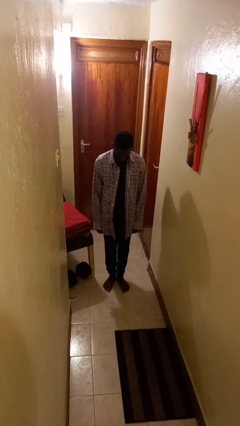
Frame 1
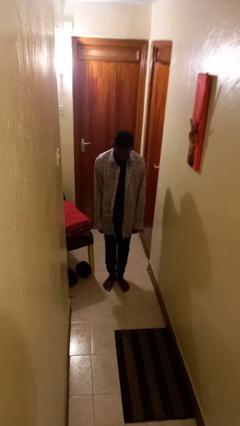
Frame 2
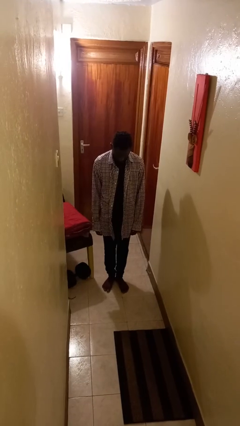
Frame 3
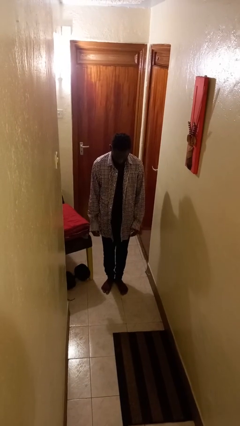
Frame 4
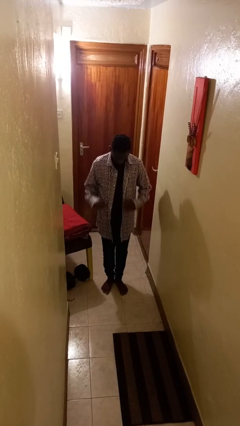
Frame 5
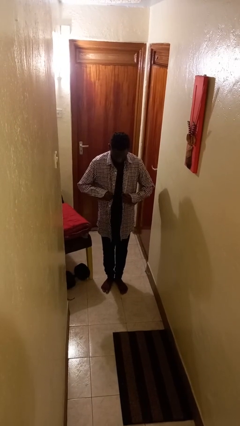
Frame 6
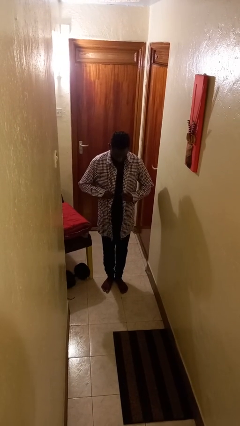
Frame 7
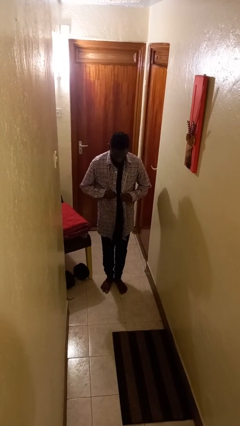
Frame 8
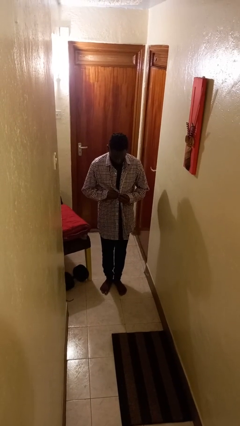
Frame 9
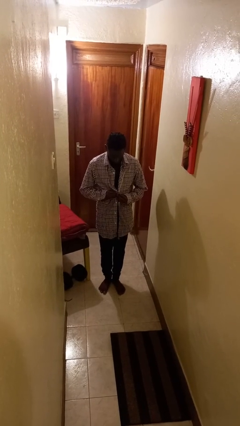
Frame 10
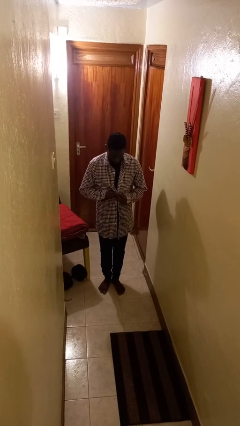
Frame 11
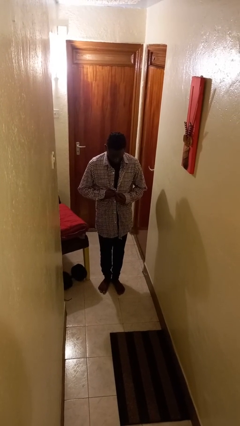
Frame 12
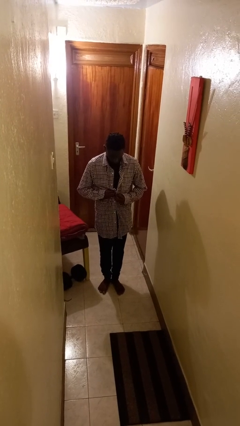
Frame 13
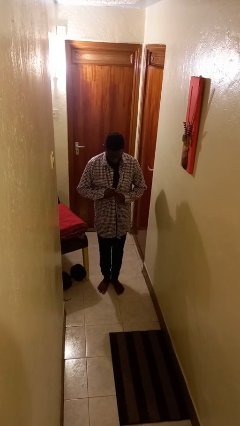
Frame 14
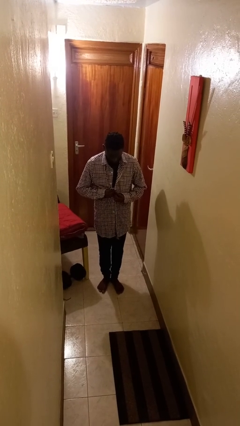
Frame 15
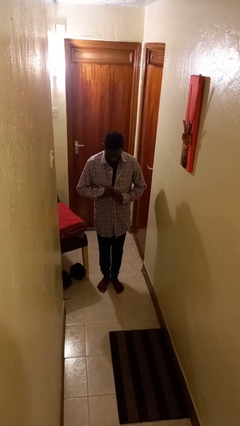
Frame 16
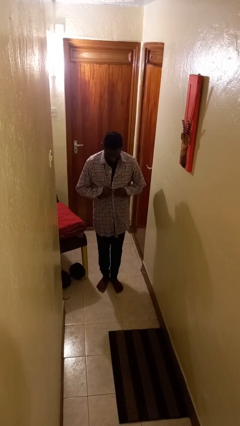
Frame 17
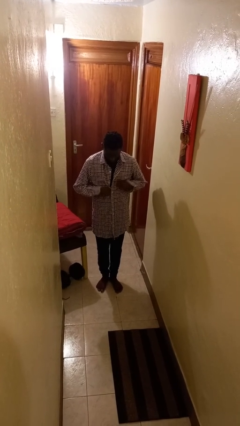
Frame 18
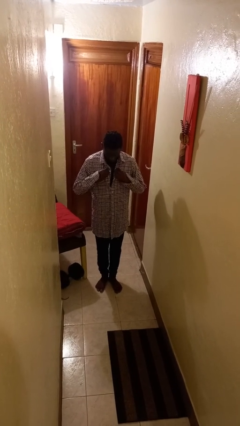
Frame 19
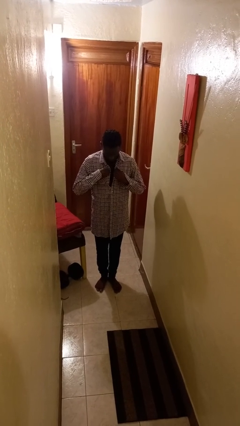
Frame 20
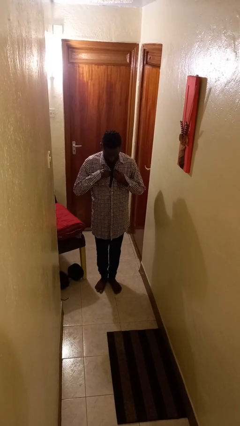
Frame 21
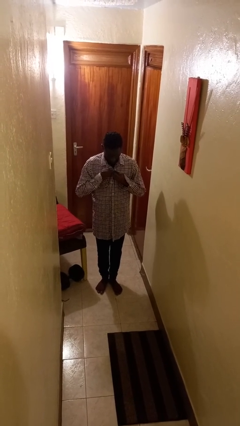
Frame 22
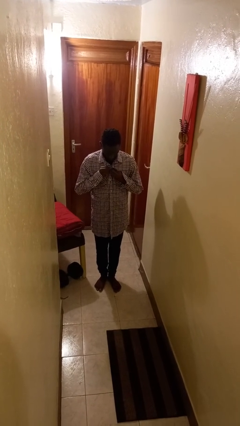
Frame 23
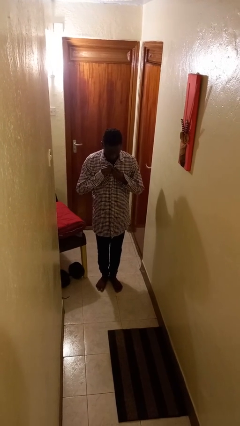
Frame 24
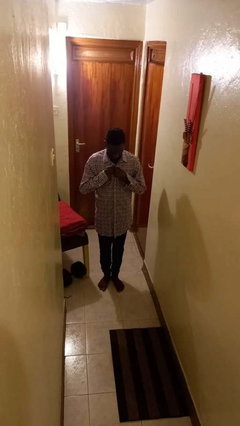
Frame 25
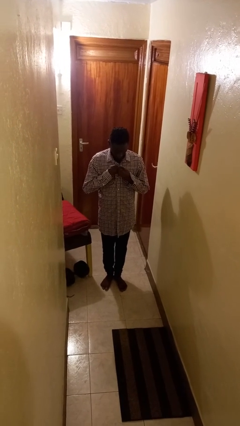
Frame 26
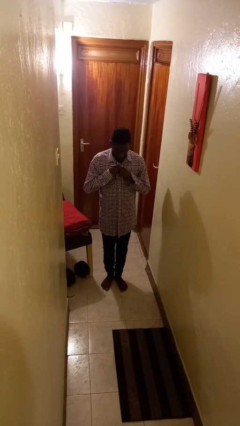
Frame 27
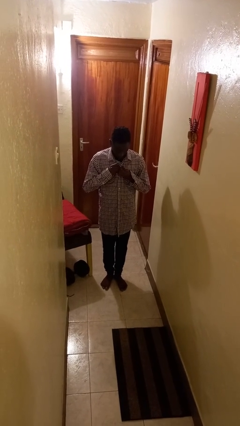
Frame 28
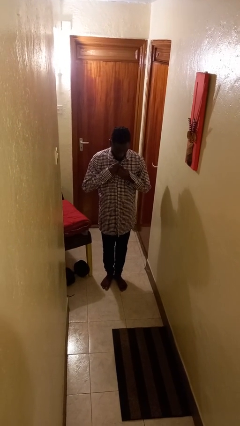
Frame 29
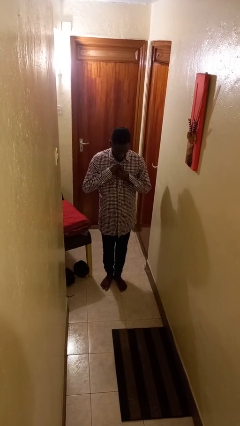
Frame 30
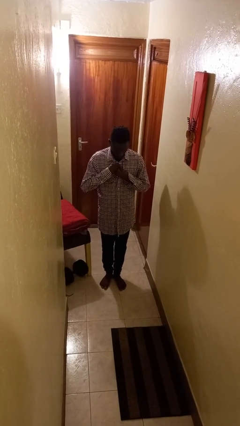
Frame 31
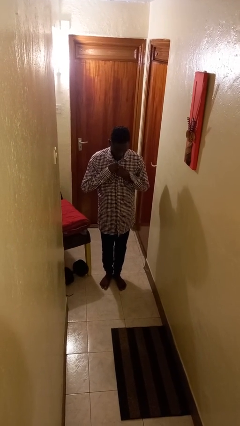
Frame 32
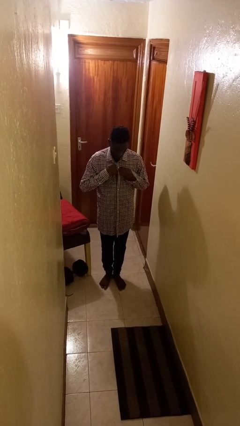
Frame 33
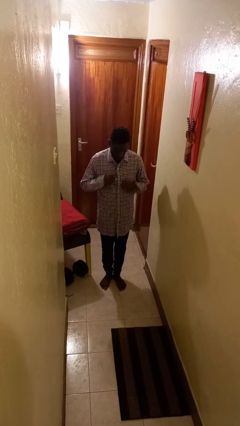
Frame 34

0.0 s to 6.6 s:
person buttons shirt

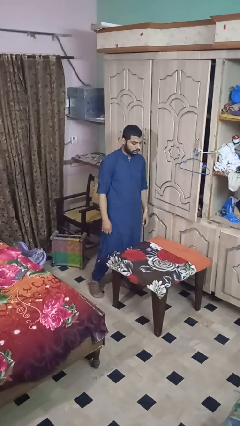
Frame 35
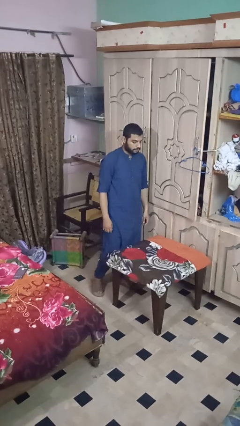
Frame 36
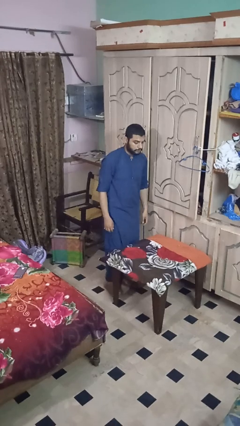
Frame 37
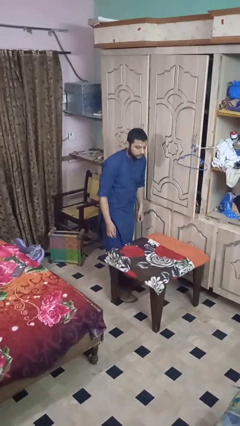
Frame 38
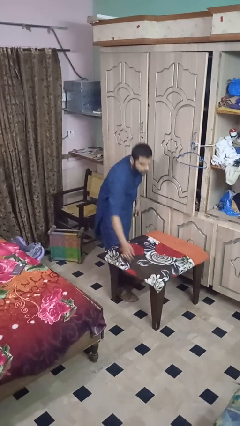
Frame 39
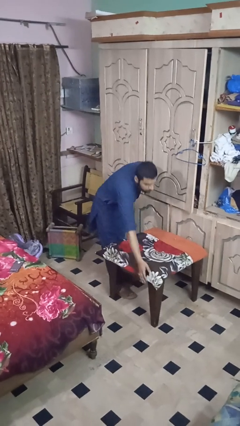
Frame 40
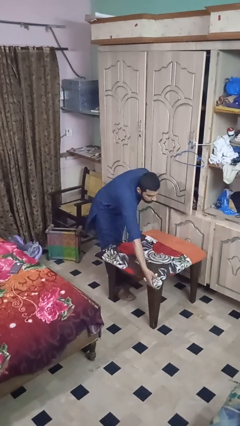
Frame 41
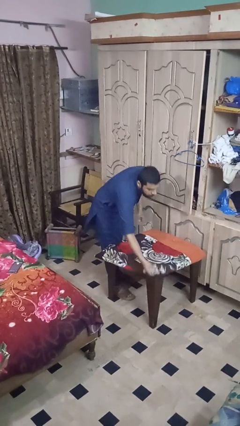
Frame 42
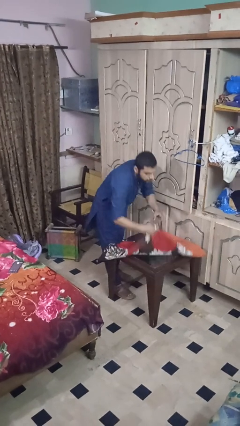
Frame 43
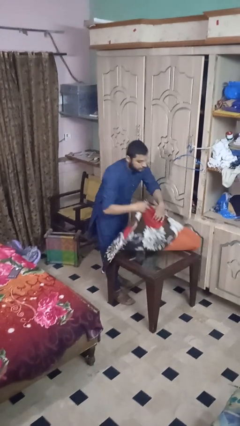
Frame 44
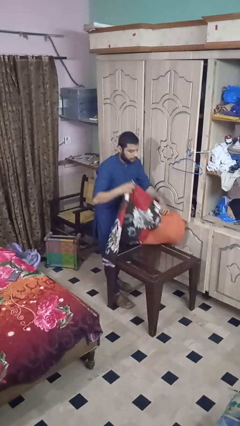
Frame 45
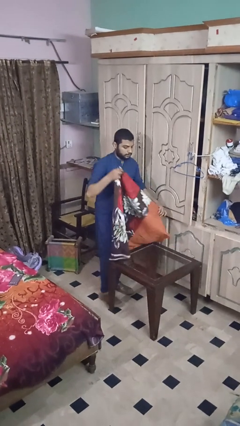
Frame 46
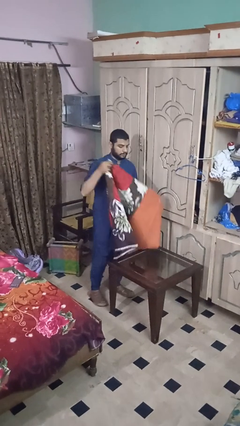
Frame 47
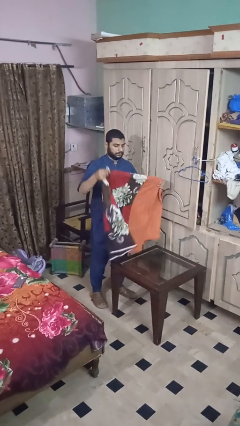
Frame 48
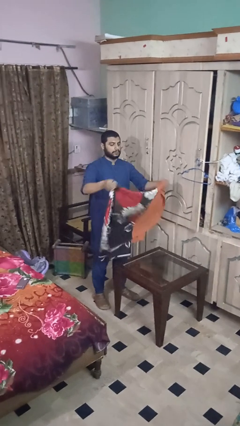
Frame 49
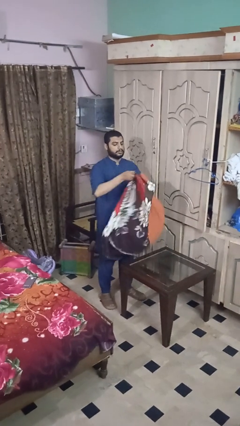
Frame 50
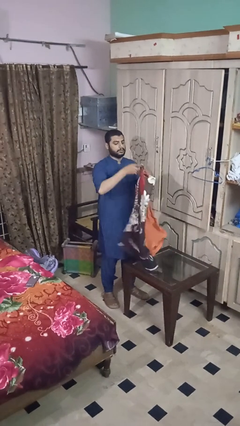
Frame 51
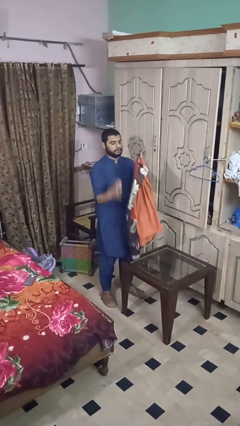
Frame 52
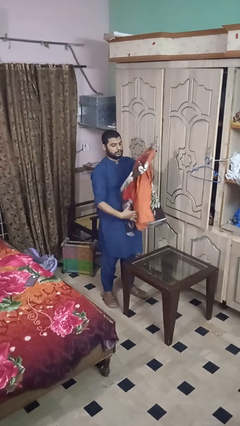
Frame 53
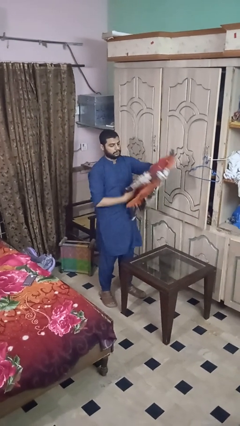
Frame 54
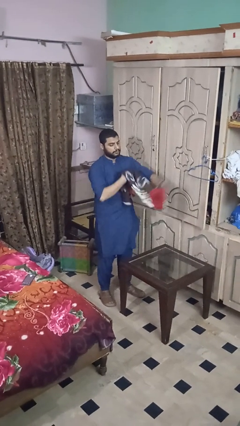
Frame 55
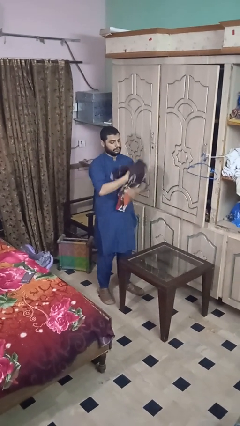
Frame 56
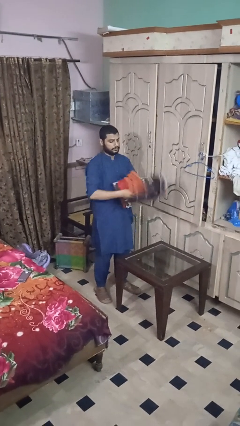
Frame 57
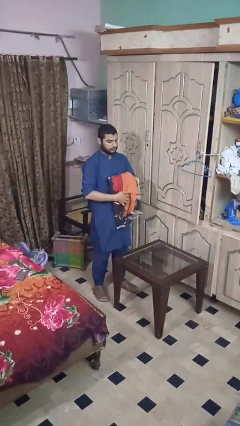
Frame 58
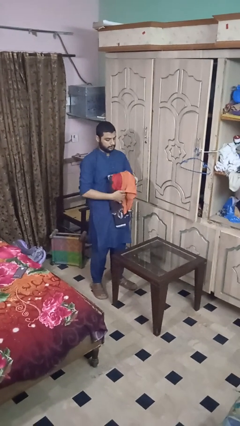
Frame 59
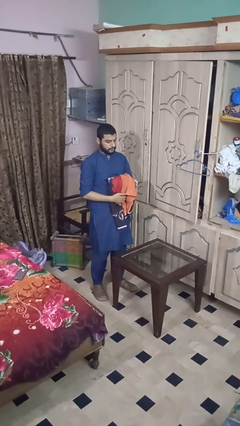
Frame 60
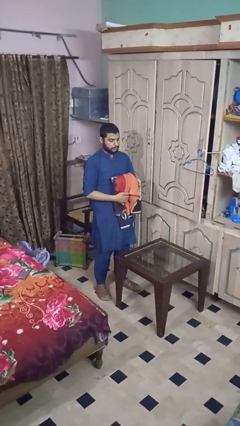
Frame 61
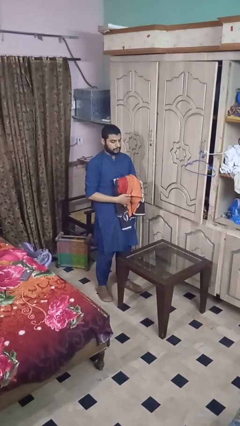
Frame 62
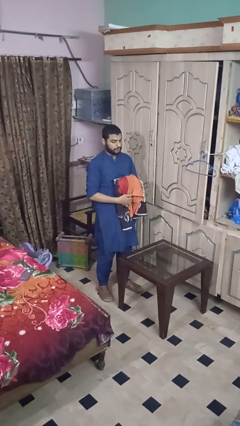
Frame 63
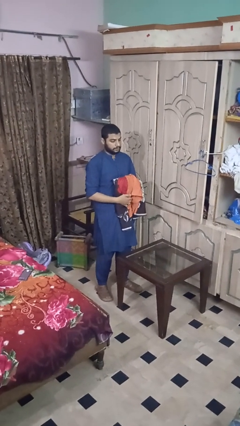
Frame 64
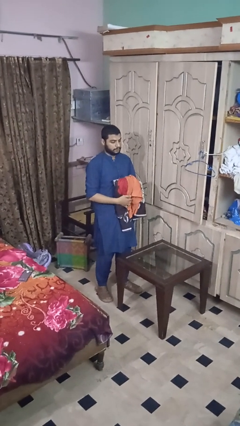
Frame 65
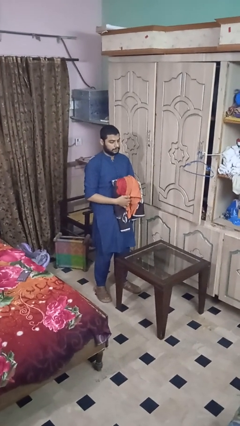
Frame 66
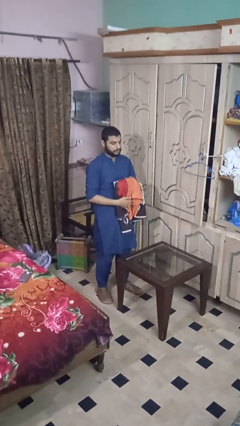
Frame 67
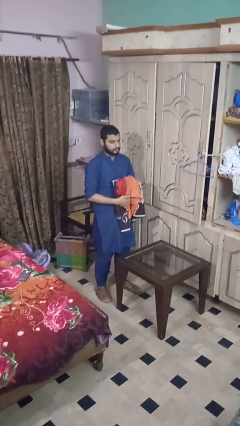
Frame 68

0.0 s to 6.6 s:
person folds tablecloth

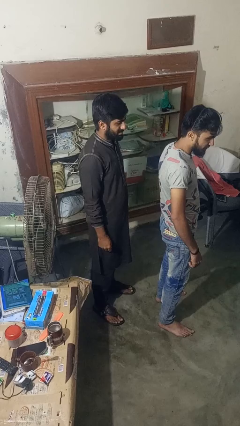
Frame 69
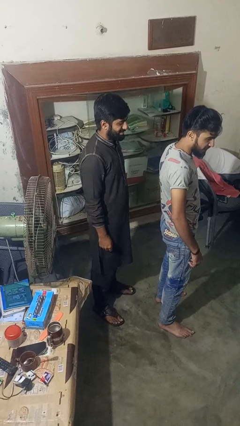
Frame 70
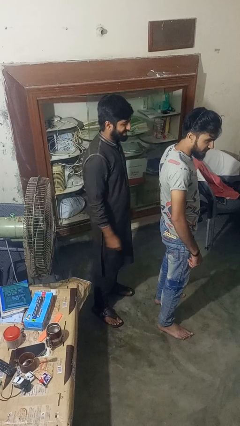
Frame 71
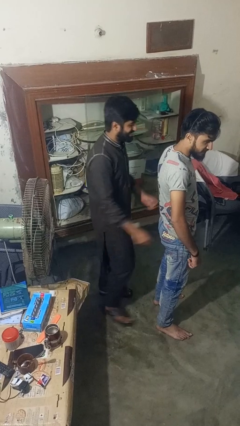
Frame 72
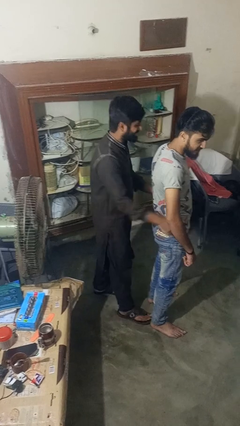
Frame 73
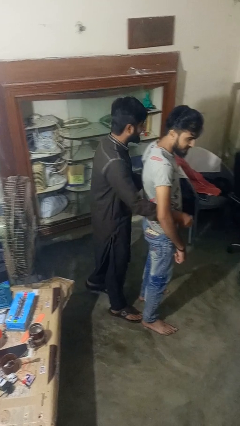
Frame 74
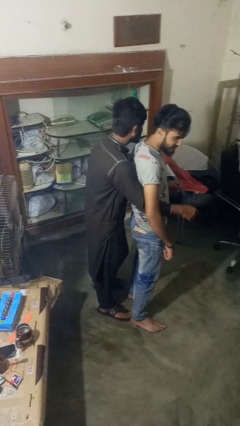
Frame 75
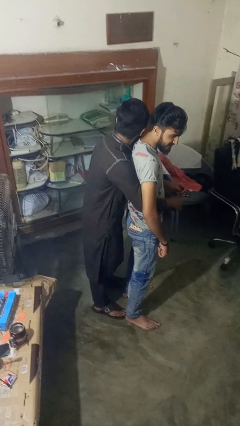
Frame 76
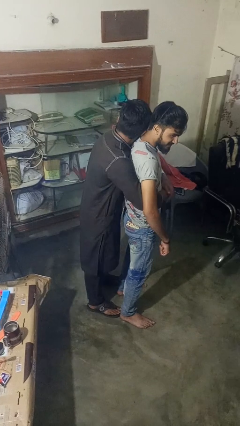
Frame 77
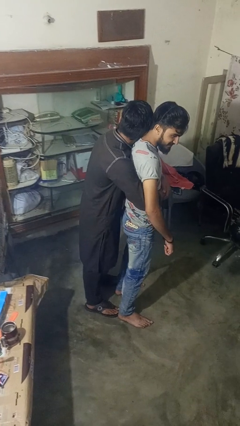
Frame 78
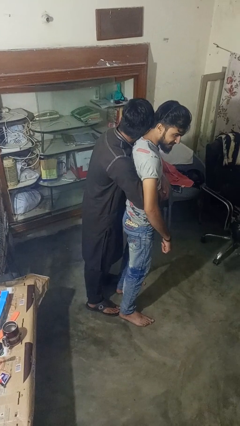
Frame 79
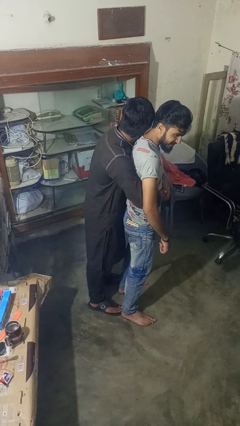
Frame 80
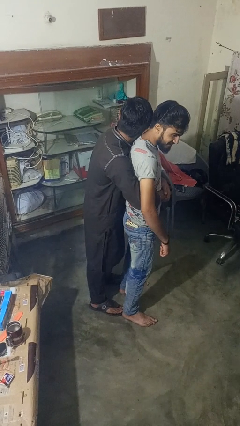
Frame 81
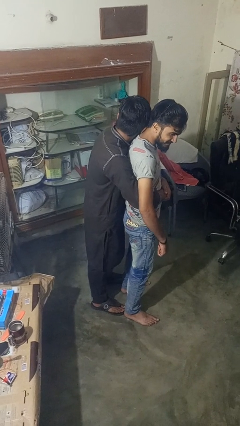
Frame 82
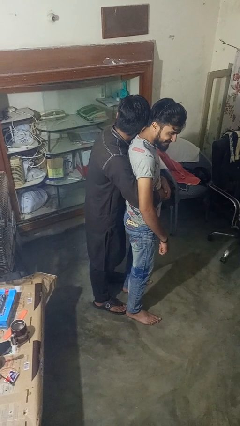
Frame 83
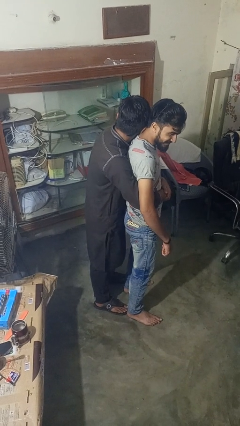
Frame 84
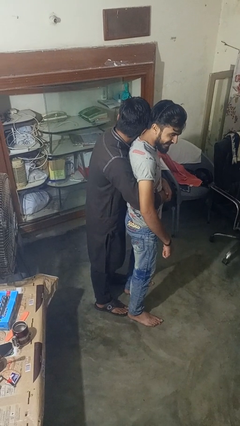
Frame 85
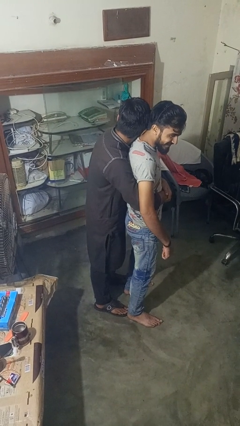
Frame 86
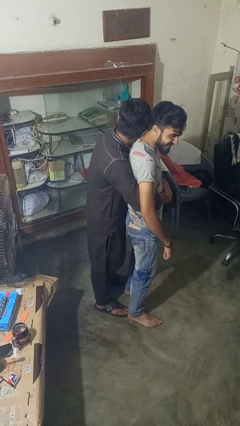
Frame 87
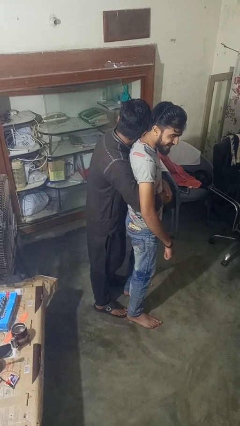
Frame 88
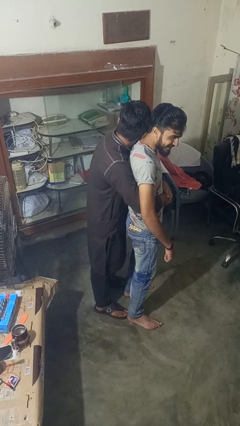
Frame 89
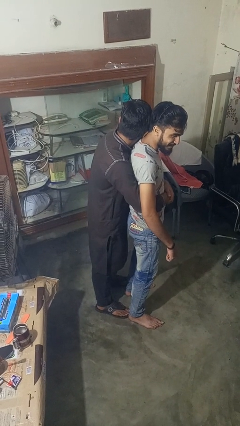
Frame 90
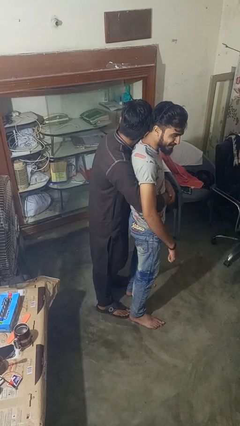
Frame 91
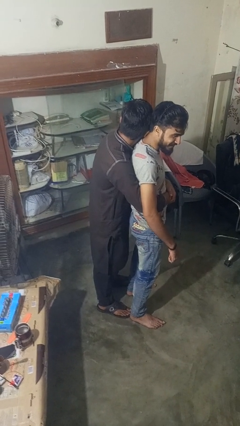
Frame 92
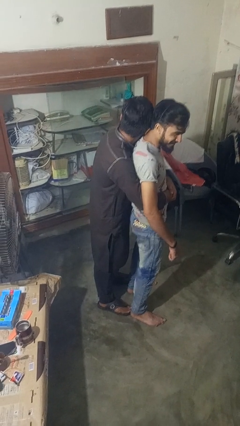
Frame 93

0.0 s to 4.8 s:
person hugs person from behind

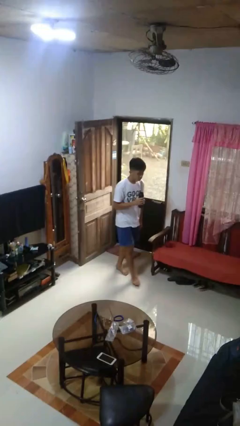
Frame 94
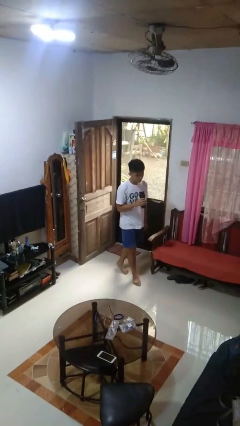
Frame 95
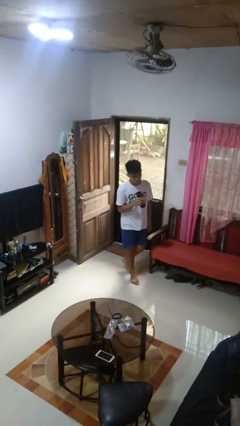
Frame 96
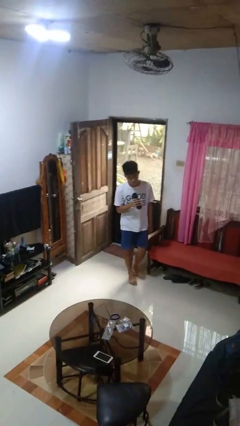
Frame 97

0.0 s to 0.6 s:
person drinks from bottle
